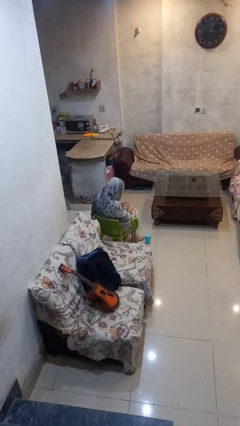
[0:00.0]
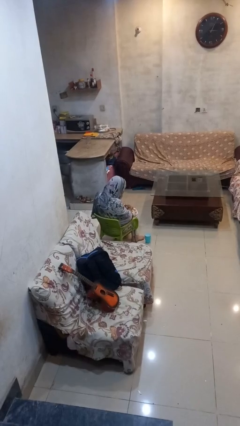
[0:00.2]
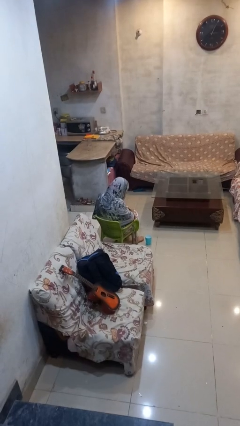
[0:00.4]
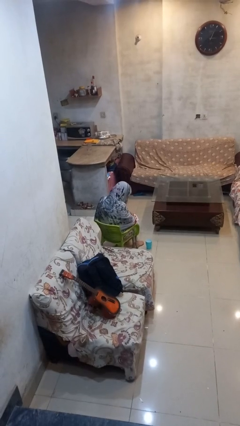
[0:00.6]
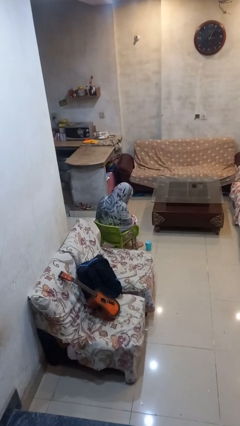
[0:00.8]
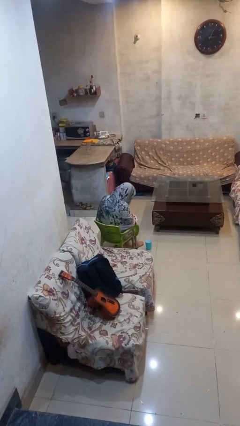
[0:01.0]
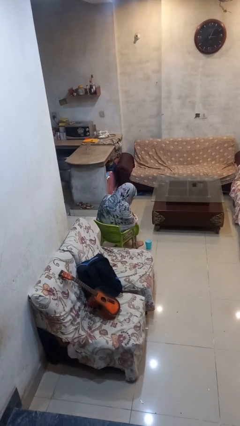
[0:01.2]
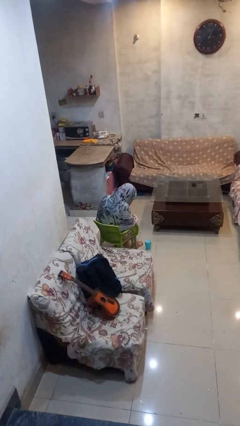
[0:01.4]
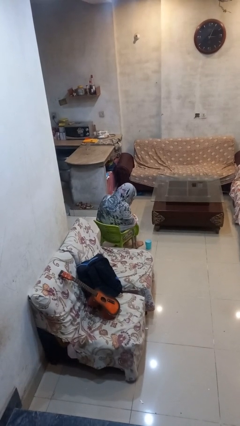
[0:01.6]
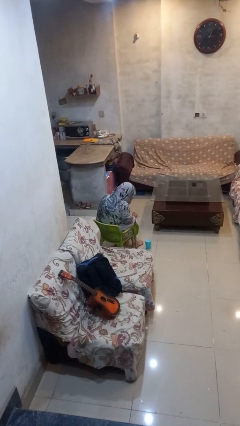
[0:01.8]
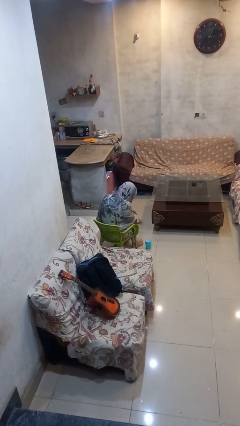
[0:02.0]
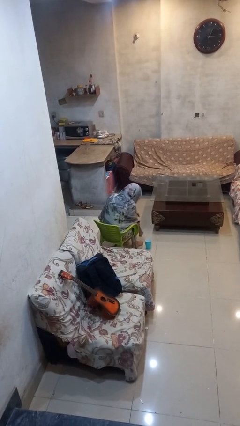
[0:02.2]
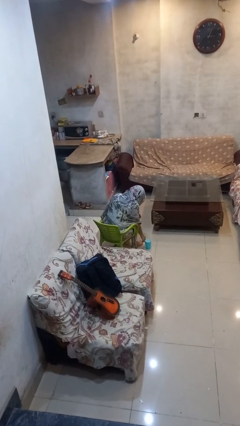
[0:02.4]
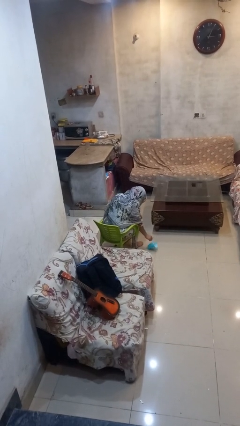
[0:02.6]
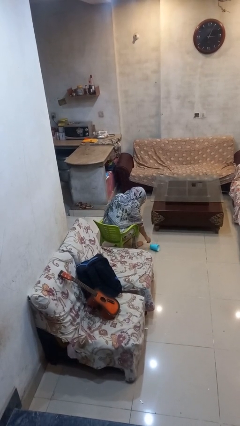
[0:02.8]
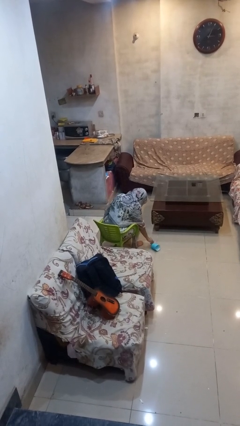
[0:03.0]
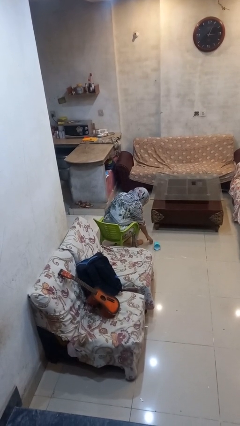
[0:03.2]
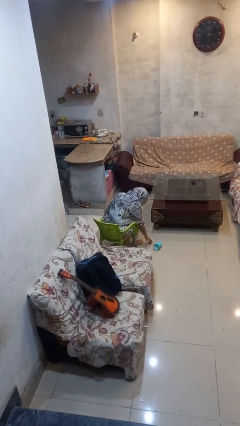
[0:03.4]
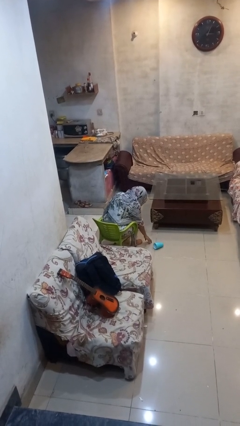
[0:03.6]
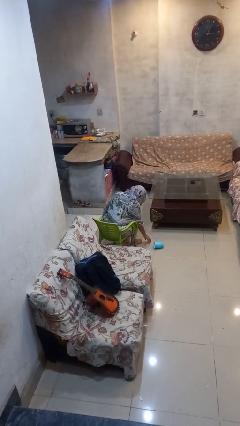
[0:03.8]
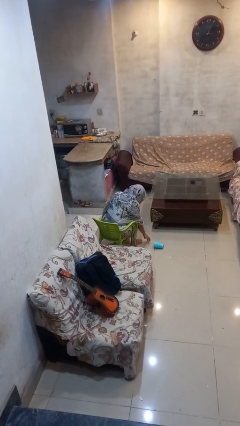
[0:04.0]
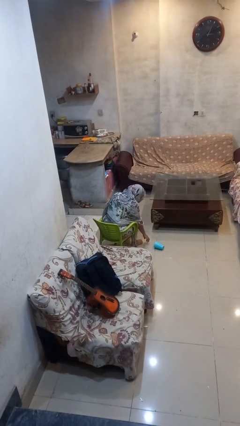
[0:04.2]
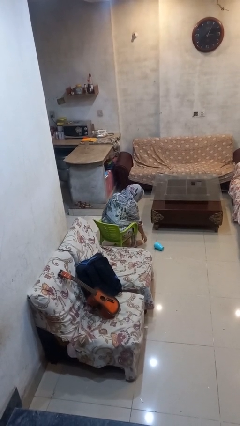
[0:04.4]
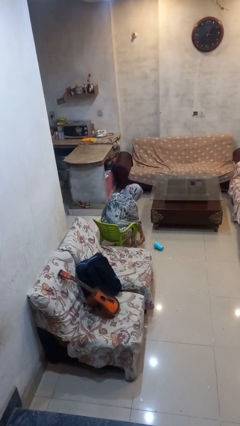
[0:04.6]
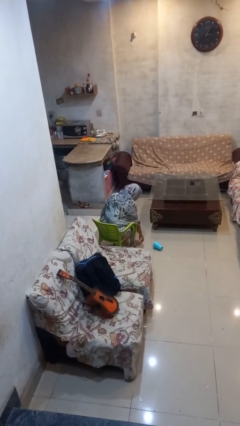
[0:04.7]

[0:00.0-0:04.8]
person spills on floor

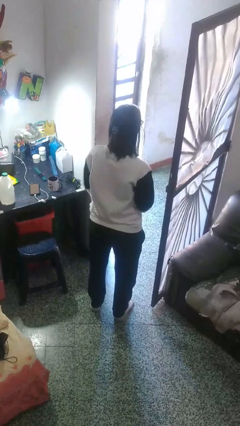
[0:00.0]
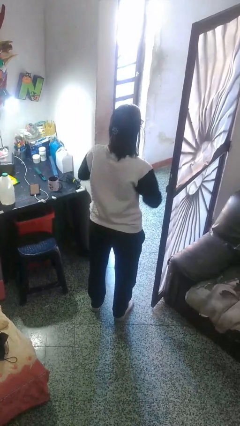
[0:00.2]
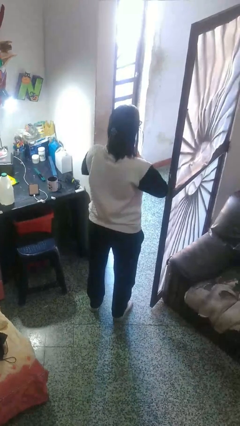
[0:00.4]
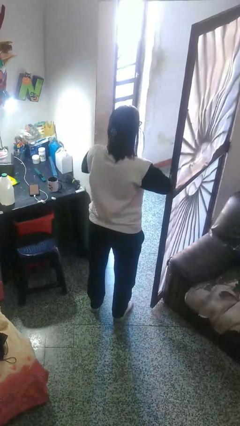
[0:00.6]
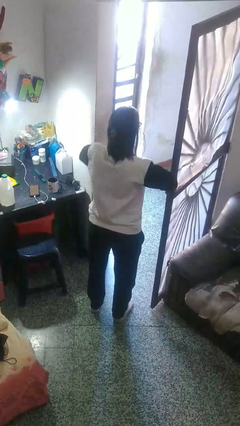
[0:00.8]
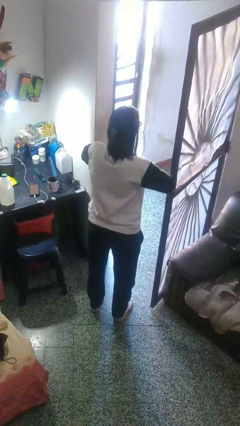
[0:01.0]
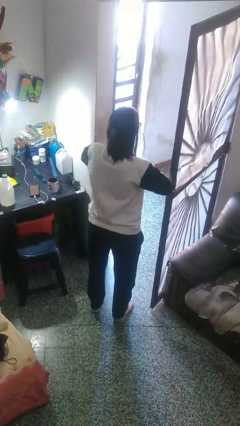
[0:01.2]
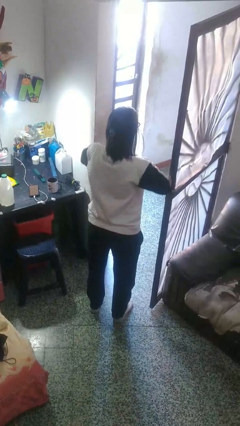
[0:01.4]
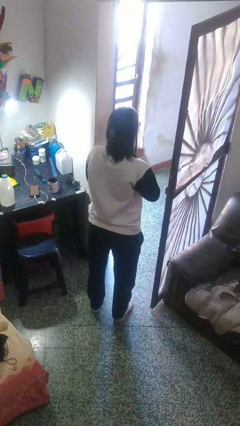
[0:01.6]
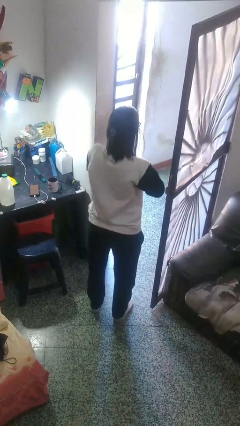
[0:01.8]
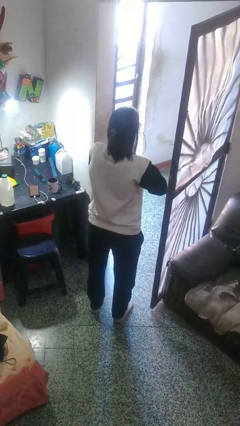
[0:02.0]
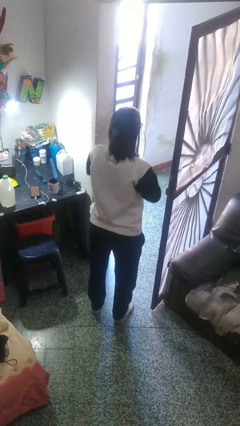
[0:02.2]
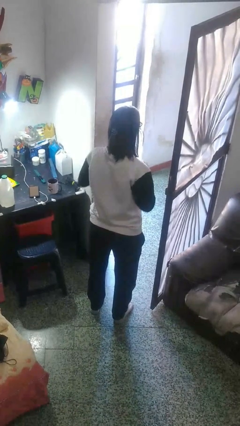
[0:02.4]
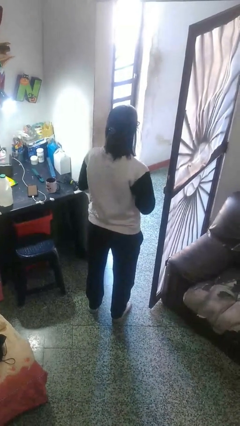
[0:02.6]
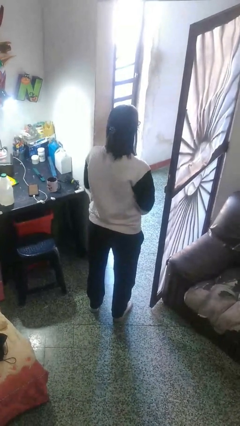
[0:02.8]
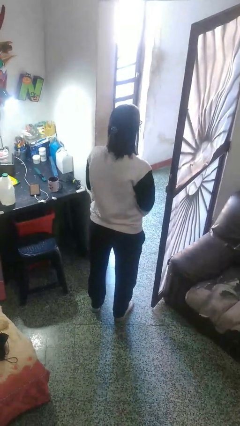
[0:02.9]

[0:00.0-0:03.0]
person cracks knuckles

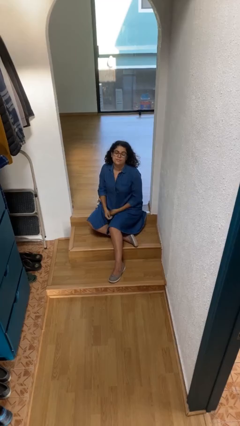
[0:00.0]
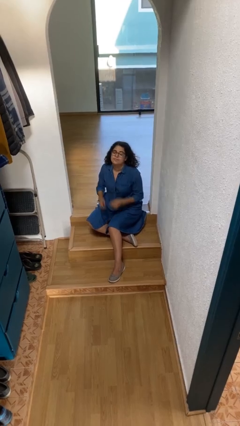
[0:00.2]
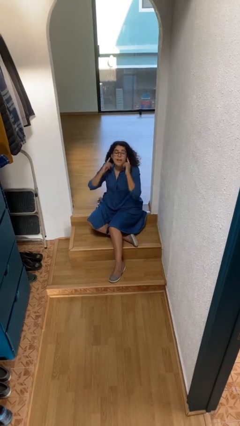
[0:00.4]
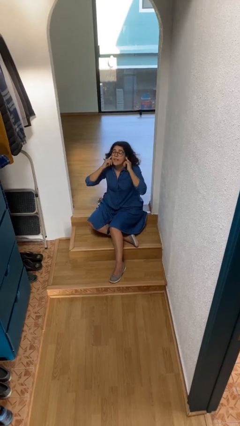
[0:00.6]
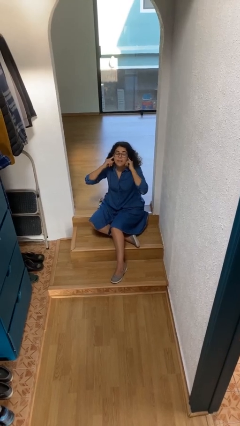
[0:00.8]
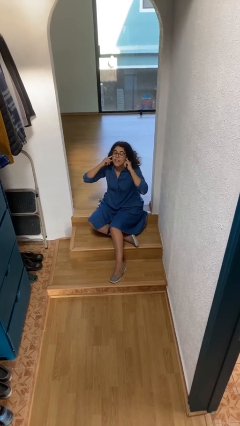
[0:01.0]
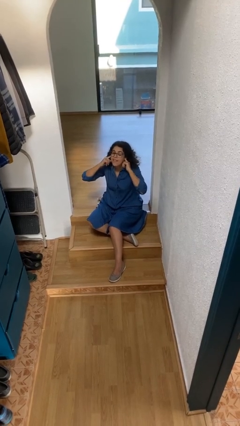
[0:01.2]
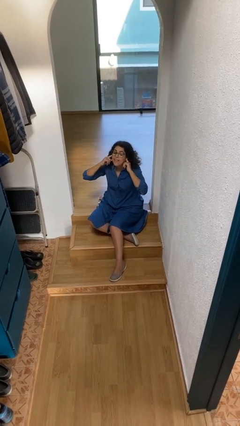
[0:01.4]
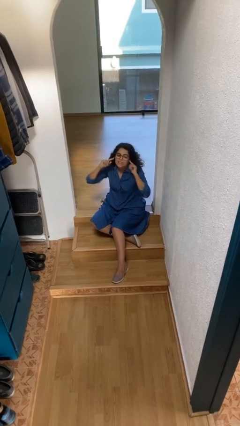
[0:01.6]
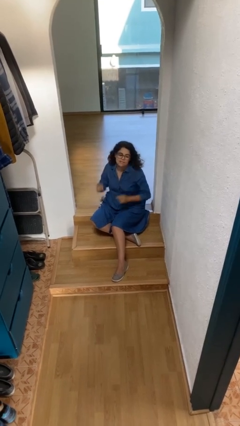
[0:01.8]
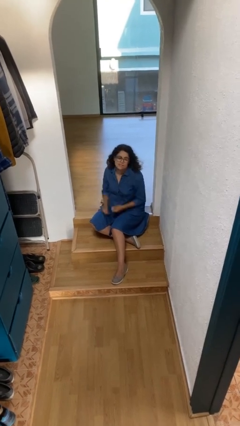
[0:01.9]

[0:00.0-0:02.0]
person puts fingers in ear

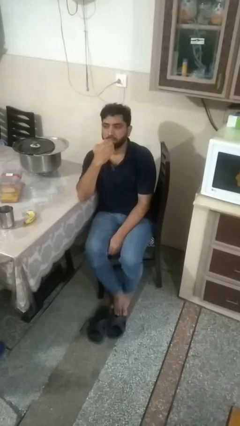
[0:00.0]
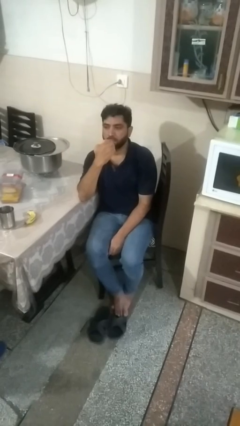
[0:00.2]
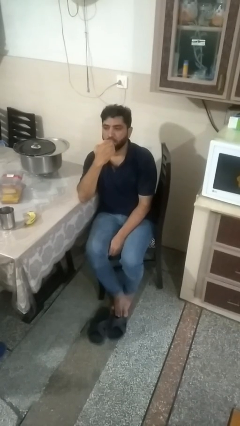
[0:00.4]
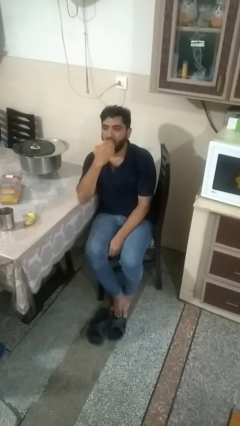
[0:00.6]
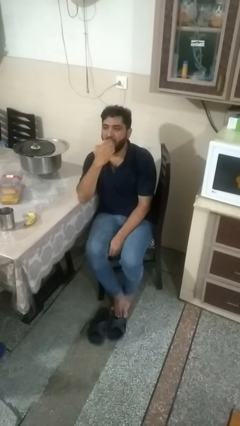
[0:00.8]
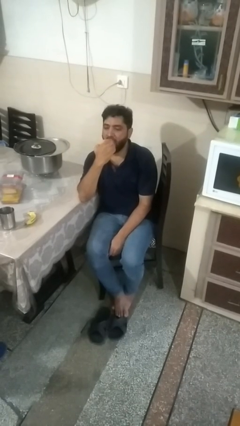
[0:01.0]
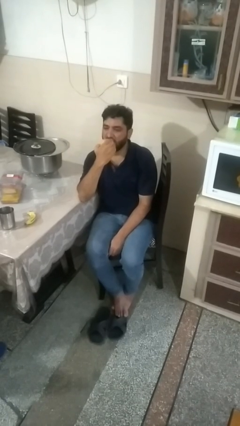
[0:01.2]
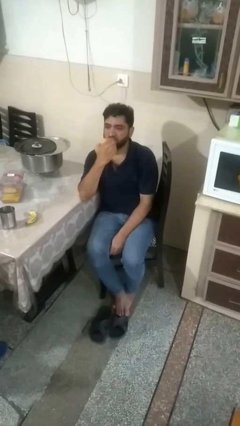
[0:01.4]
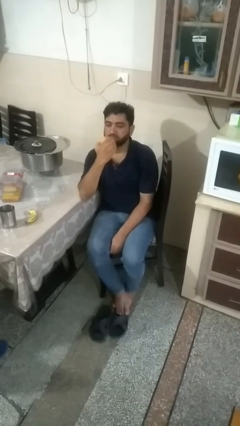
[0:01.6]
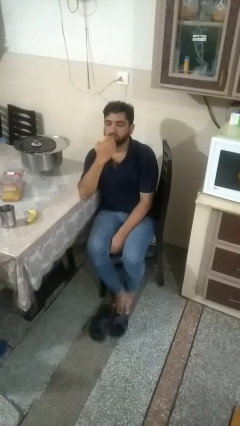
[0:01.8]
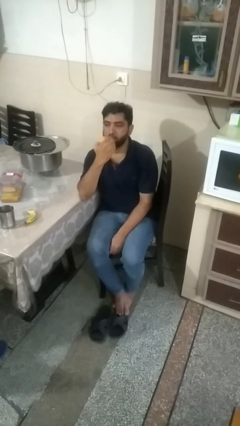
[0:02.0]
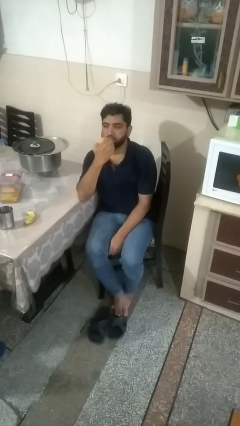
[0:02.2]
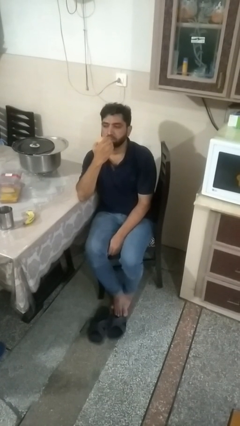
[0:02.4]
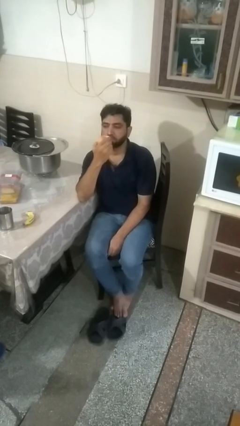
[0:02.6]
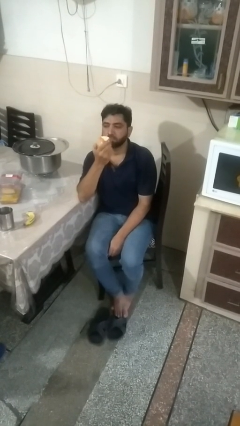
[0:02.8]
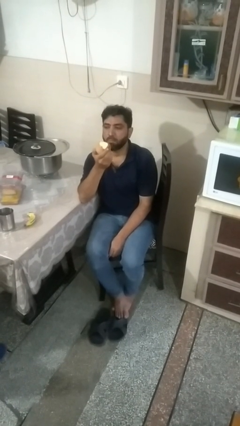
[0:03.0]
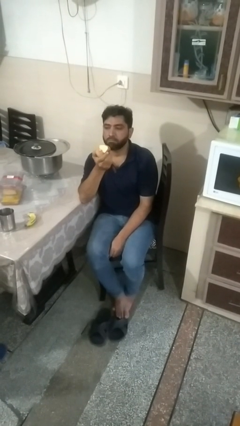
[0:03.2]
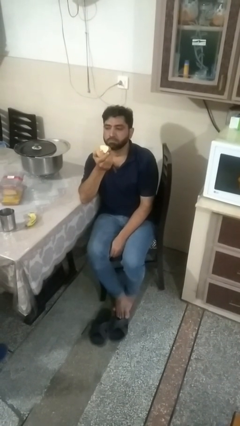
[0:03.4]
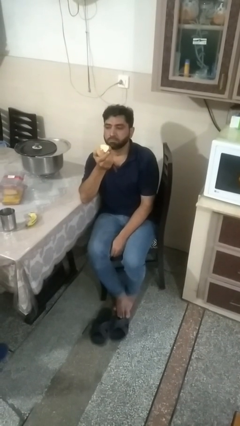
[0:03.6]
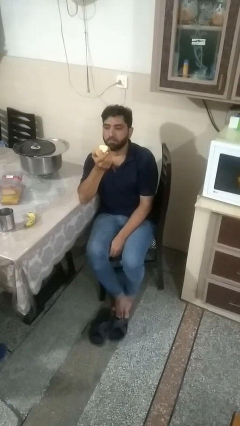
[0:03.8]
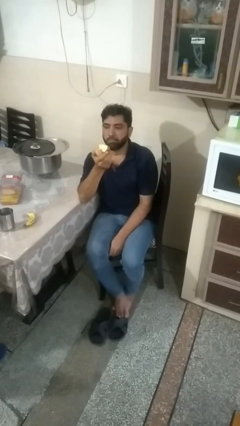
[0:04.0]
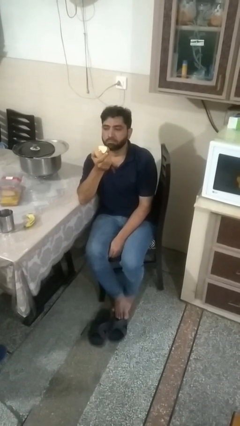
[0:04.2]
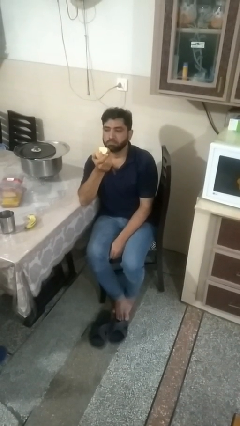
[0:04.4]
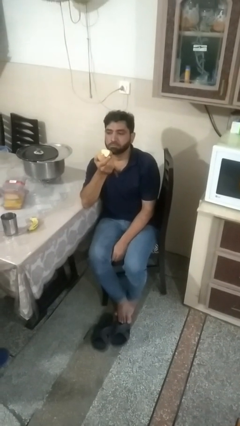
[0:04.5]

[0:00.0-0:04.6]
person eats apple

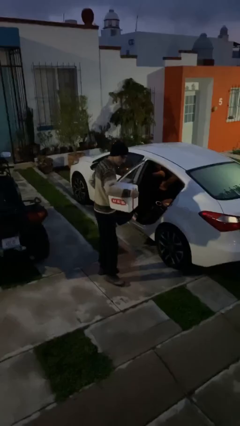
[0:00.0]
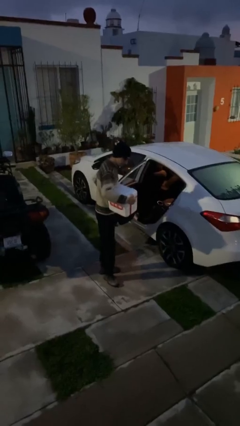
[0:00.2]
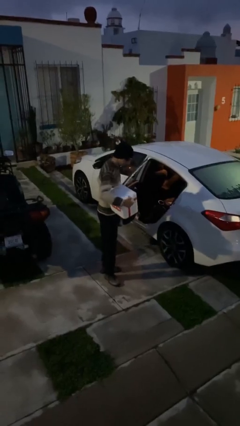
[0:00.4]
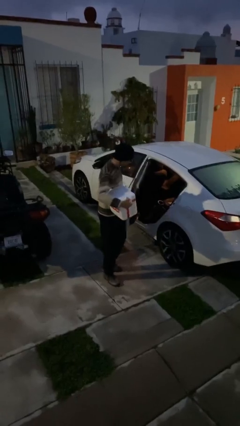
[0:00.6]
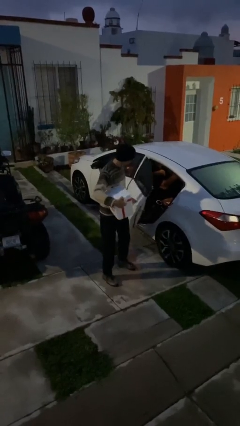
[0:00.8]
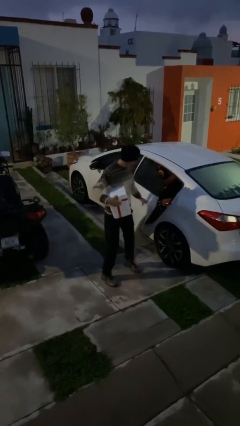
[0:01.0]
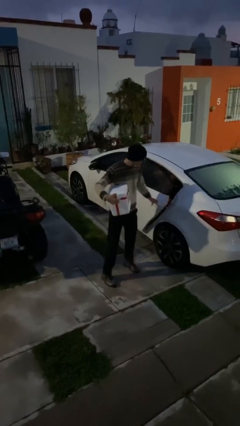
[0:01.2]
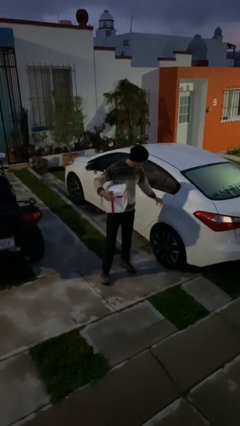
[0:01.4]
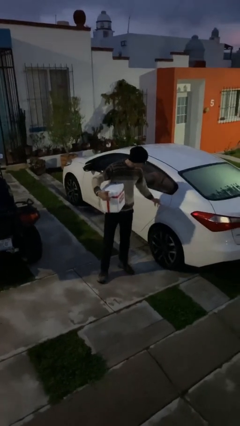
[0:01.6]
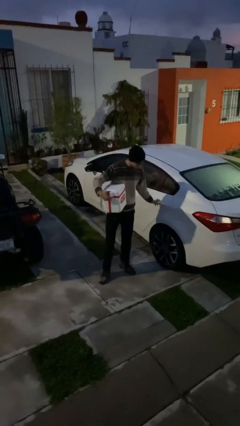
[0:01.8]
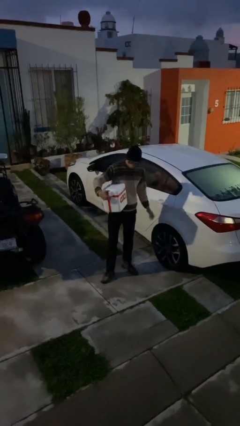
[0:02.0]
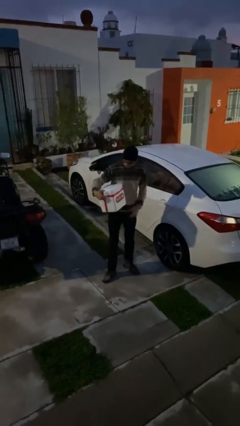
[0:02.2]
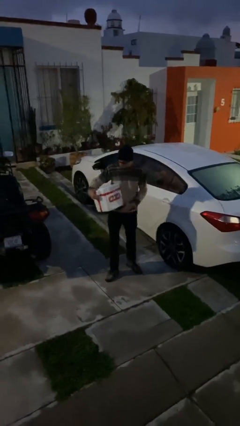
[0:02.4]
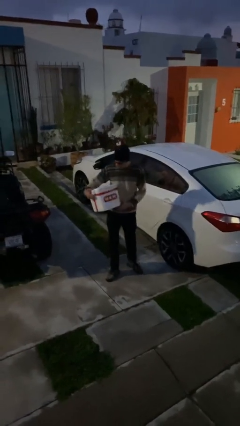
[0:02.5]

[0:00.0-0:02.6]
person closes car door

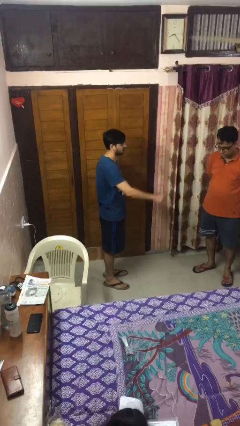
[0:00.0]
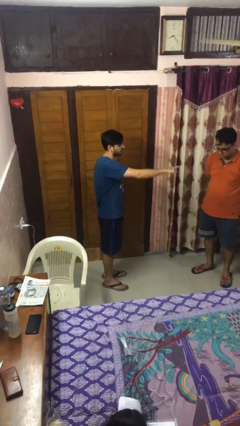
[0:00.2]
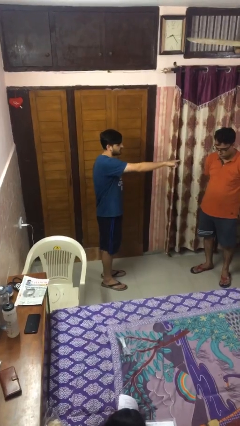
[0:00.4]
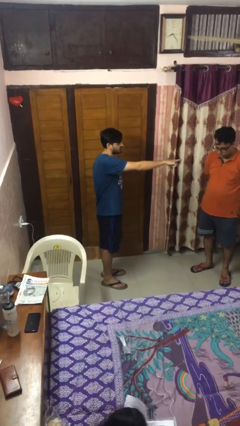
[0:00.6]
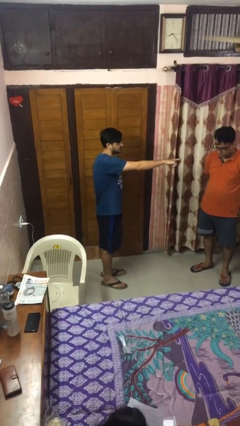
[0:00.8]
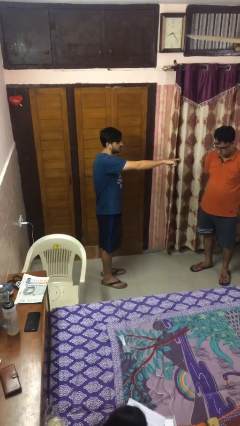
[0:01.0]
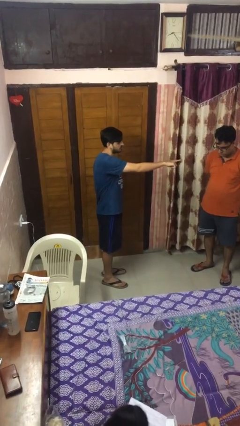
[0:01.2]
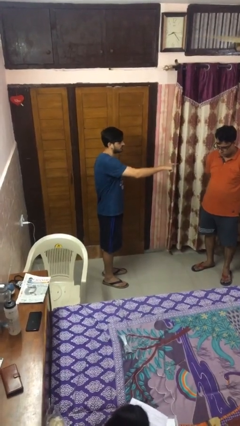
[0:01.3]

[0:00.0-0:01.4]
person points at person
